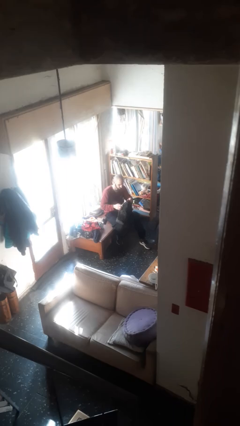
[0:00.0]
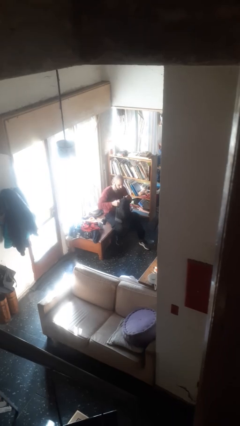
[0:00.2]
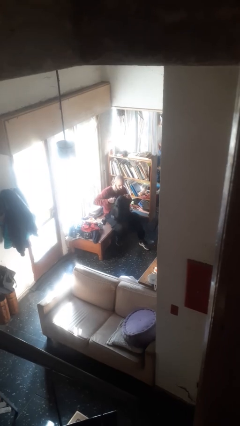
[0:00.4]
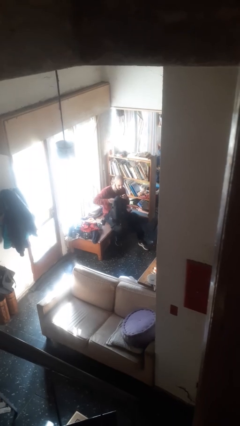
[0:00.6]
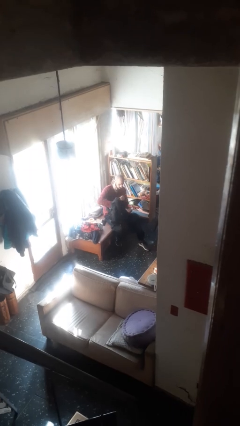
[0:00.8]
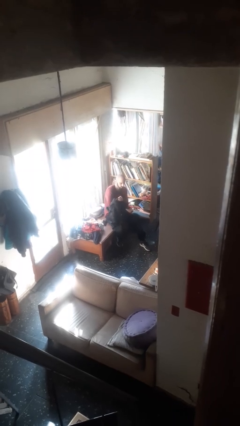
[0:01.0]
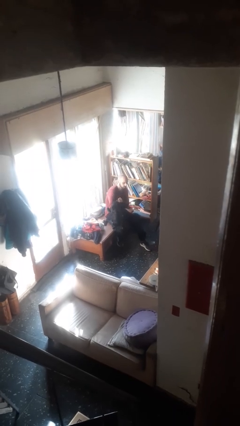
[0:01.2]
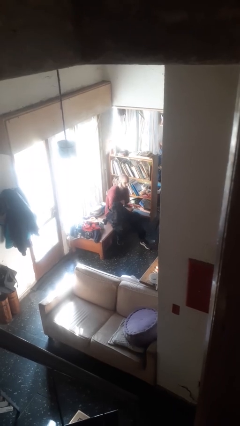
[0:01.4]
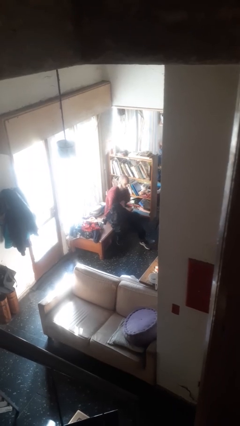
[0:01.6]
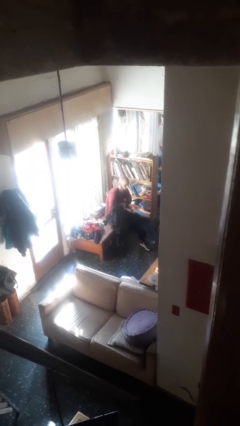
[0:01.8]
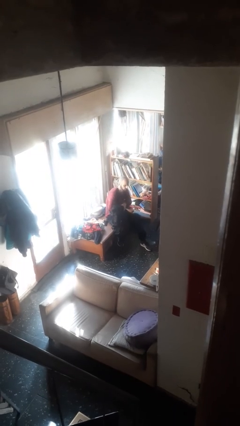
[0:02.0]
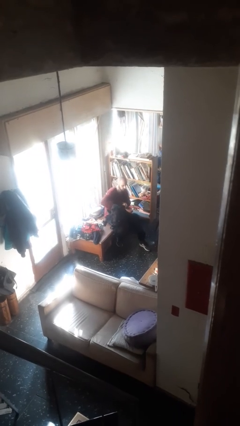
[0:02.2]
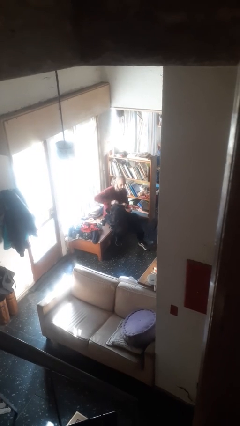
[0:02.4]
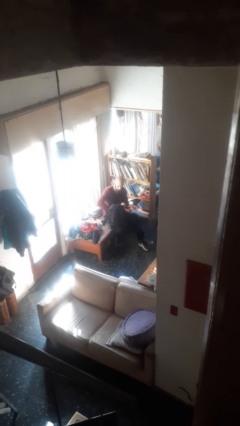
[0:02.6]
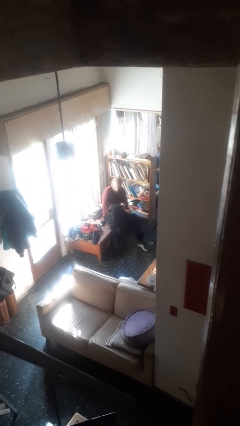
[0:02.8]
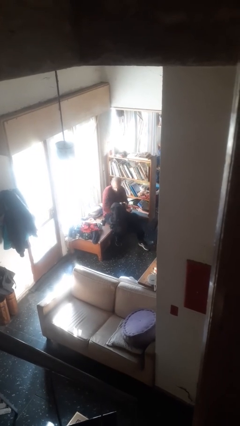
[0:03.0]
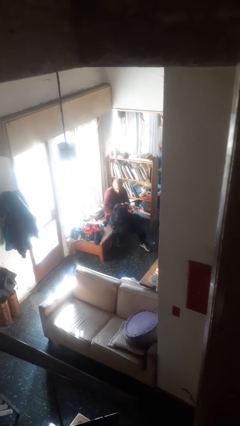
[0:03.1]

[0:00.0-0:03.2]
person searches in backpack

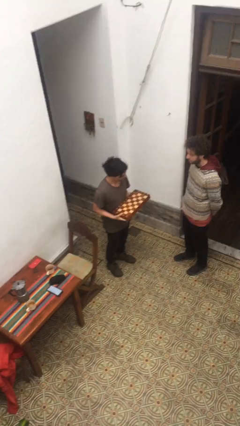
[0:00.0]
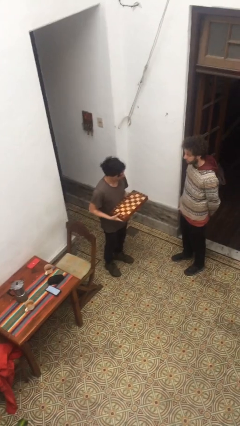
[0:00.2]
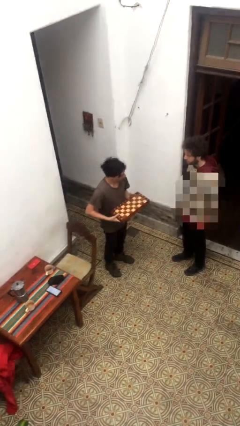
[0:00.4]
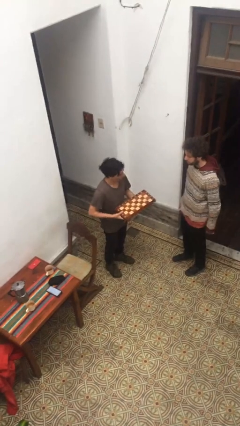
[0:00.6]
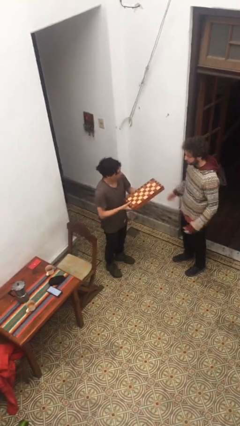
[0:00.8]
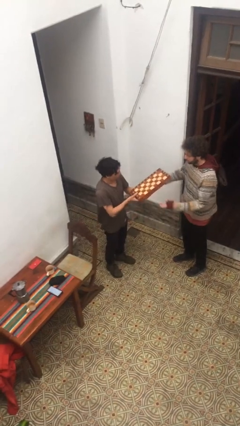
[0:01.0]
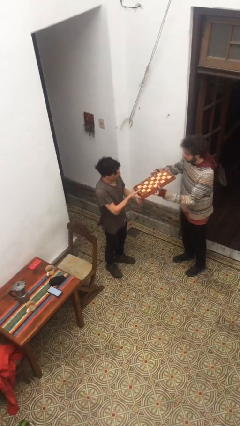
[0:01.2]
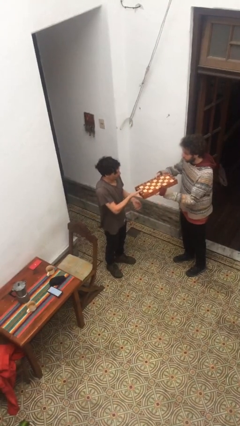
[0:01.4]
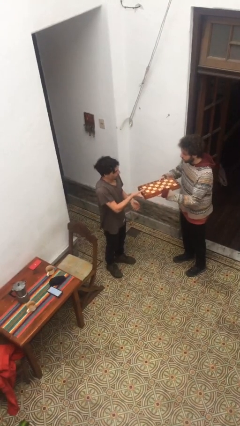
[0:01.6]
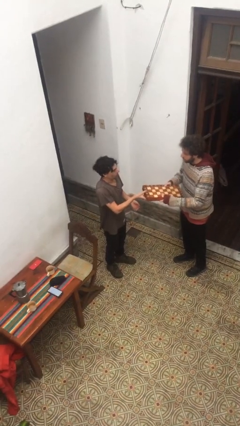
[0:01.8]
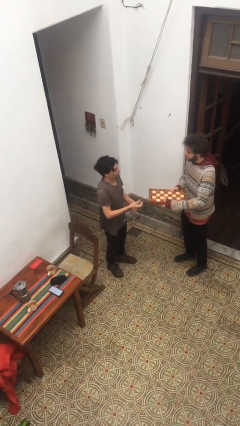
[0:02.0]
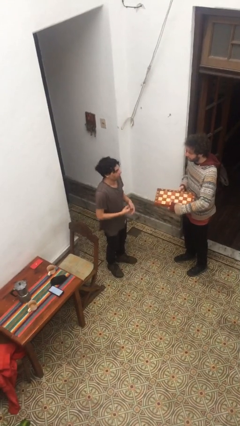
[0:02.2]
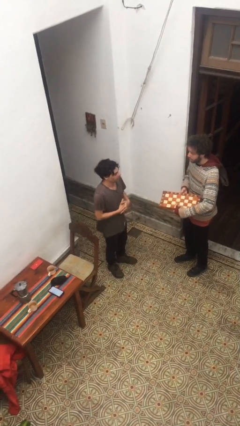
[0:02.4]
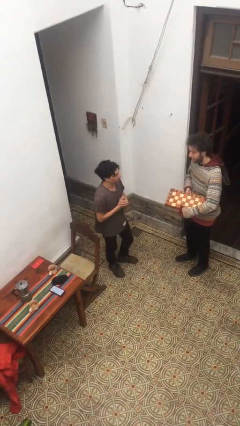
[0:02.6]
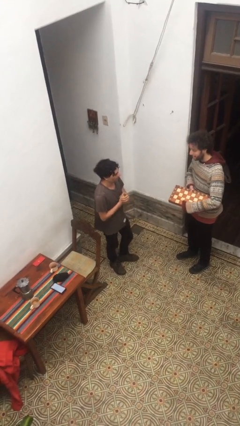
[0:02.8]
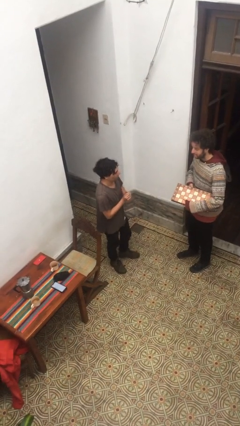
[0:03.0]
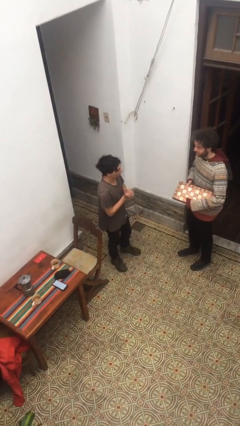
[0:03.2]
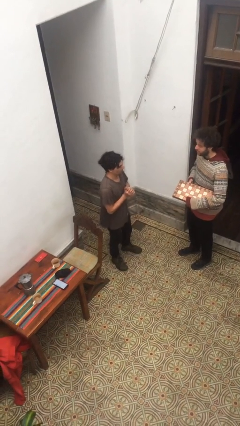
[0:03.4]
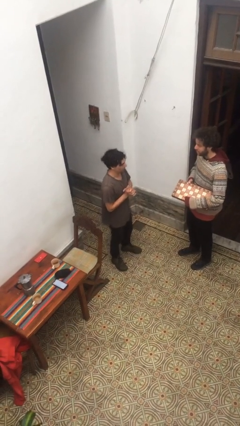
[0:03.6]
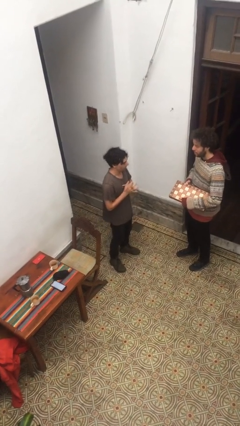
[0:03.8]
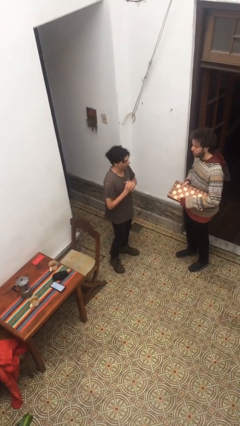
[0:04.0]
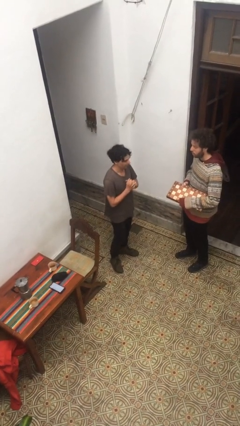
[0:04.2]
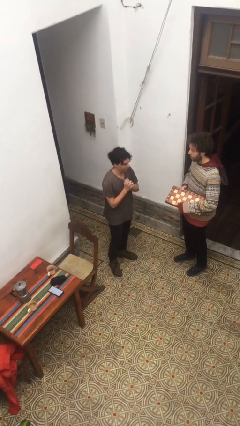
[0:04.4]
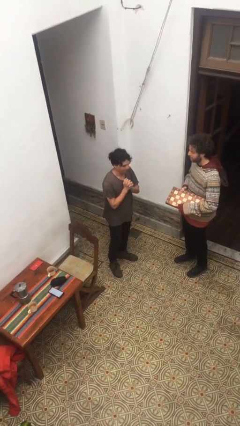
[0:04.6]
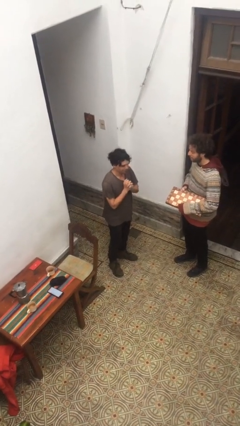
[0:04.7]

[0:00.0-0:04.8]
person transfers object to person

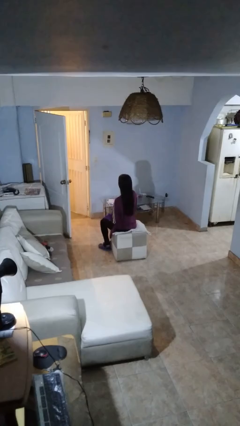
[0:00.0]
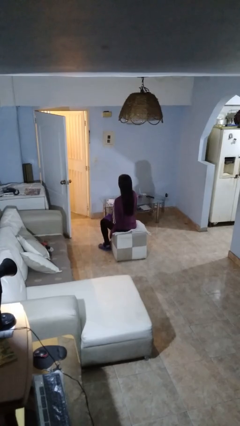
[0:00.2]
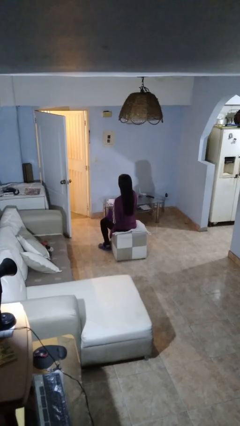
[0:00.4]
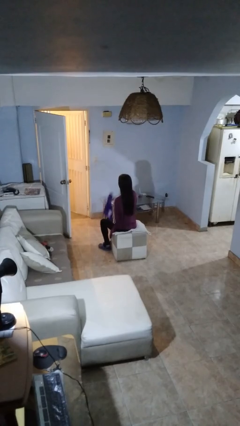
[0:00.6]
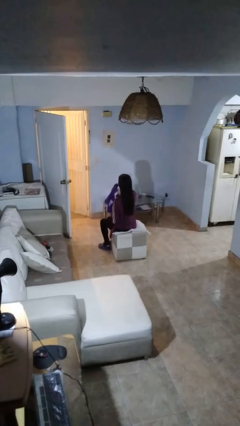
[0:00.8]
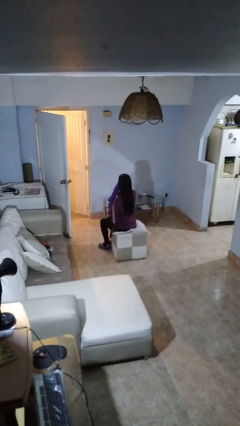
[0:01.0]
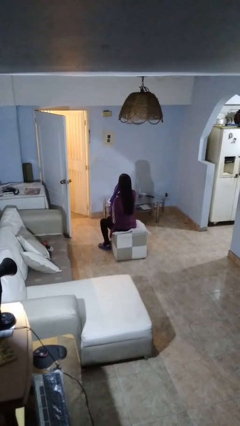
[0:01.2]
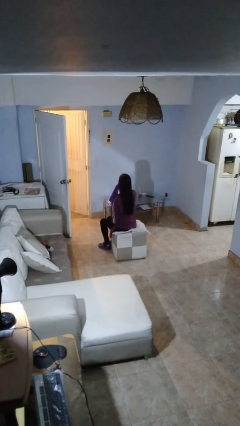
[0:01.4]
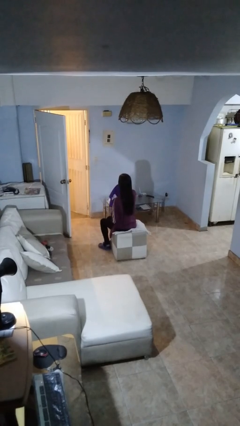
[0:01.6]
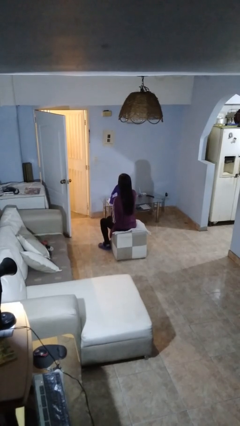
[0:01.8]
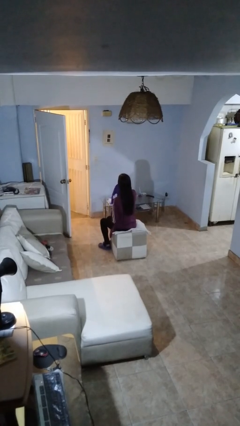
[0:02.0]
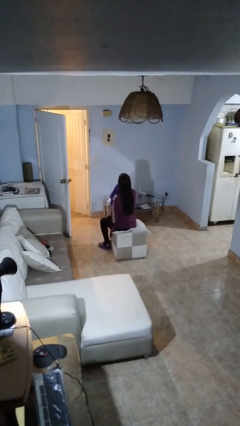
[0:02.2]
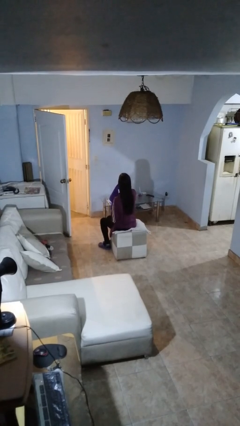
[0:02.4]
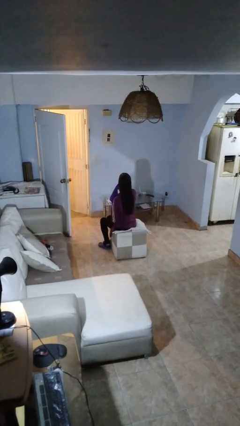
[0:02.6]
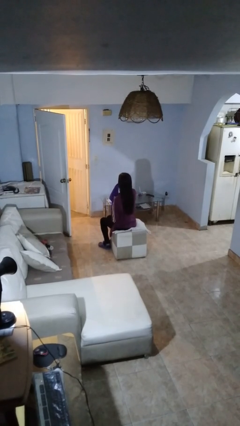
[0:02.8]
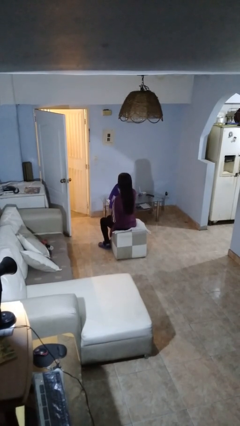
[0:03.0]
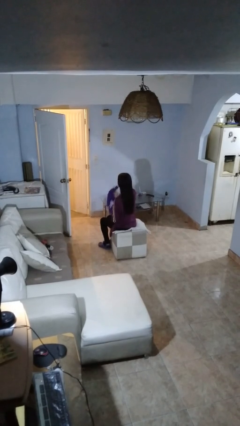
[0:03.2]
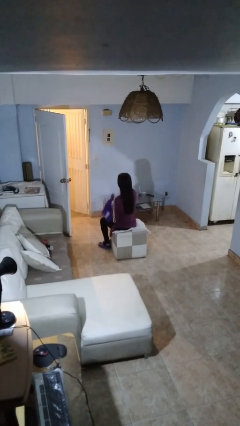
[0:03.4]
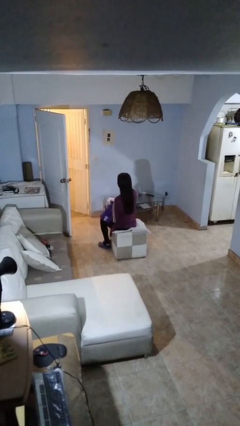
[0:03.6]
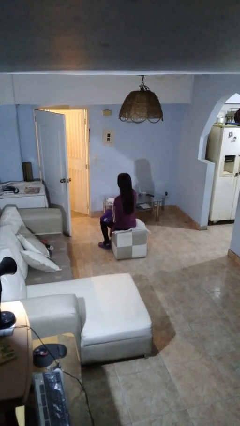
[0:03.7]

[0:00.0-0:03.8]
person wipes mouth with napkin

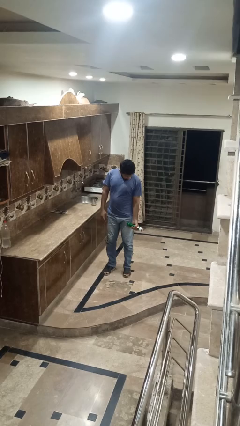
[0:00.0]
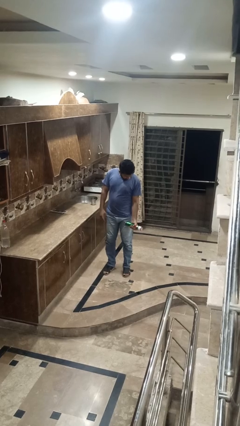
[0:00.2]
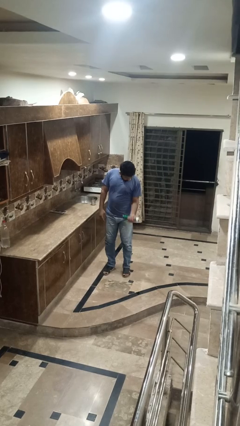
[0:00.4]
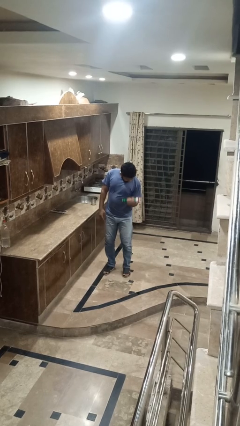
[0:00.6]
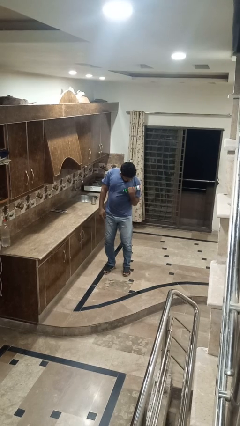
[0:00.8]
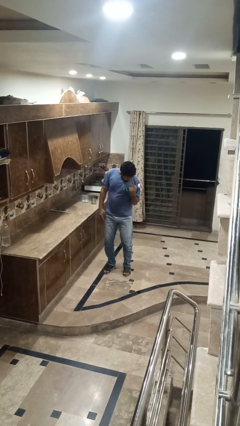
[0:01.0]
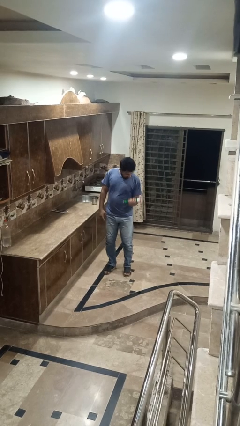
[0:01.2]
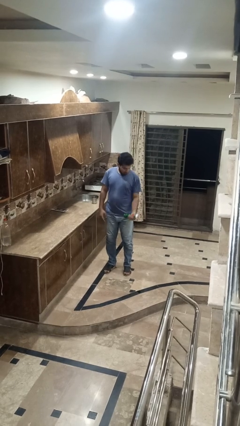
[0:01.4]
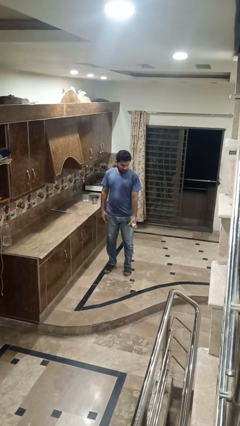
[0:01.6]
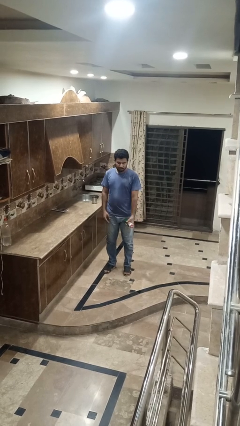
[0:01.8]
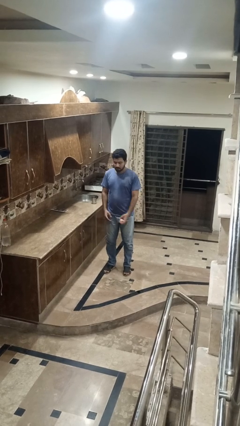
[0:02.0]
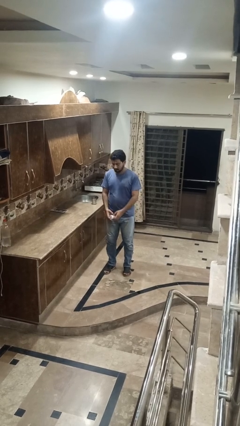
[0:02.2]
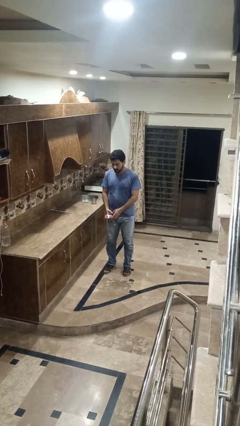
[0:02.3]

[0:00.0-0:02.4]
person lifts dumbbells

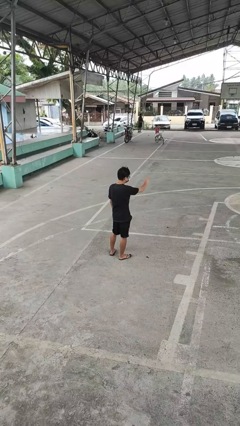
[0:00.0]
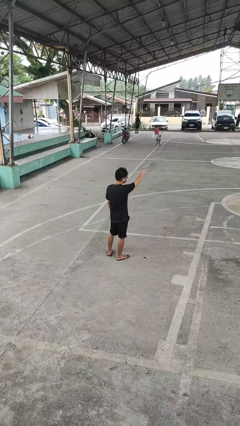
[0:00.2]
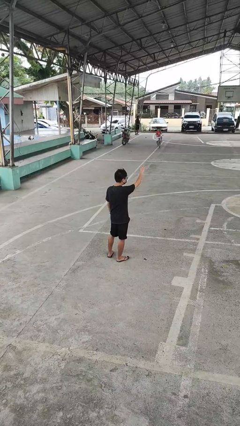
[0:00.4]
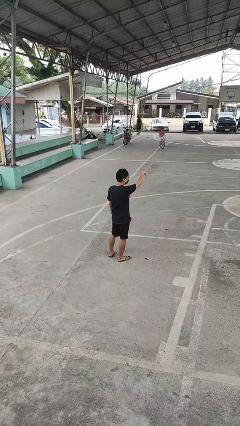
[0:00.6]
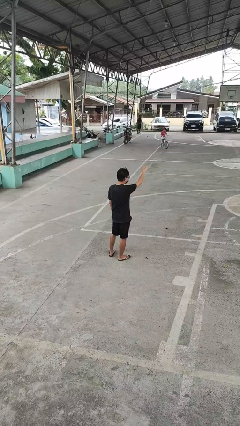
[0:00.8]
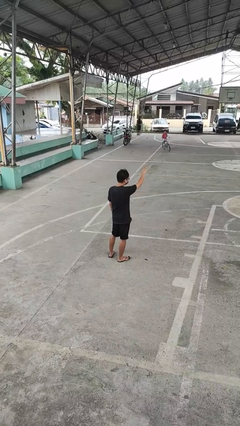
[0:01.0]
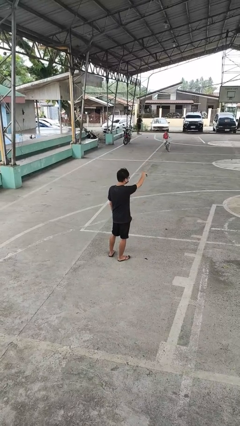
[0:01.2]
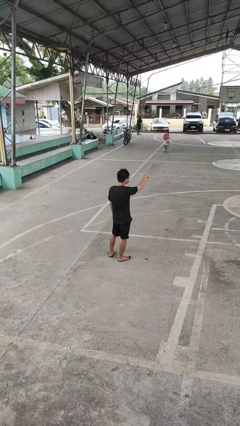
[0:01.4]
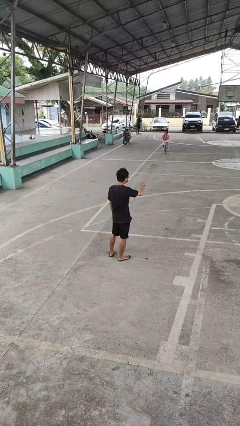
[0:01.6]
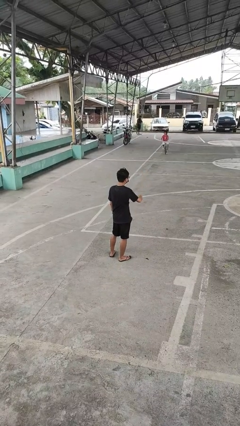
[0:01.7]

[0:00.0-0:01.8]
person gestures come here

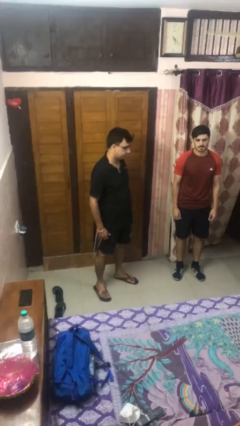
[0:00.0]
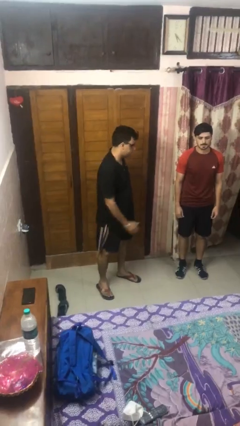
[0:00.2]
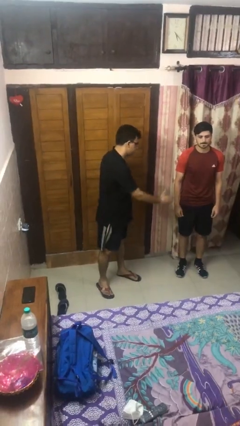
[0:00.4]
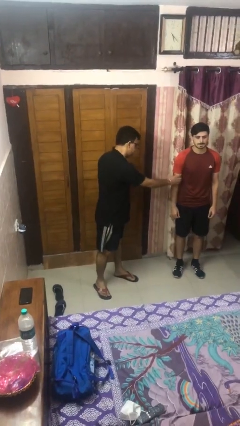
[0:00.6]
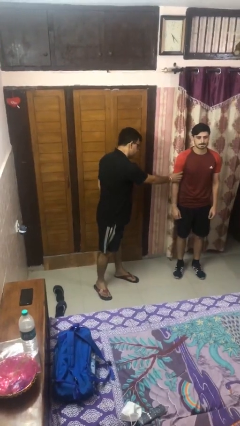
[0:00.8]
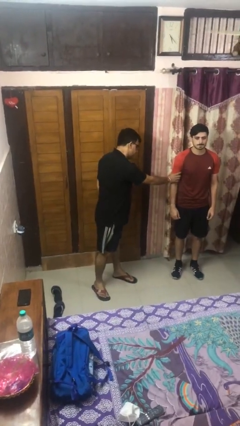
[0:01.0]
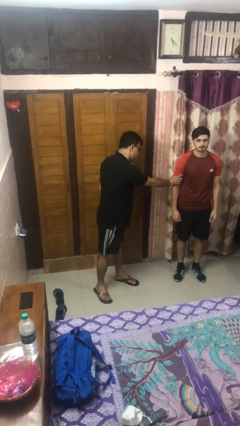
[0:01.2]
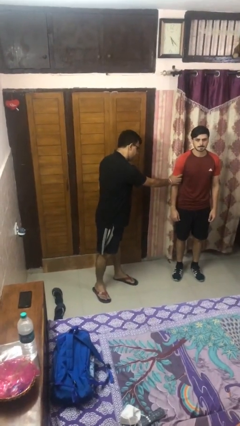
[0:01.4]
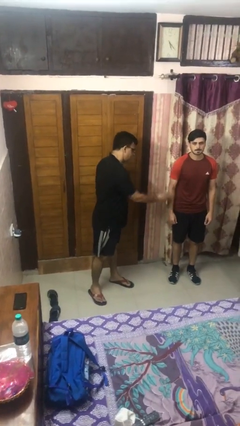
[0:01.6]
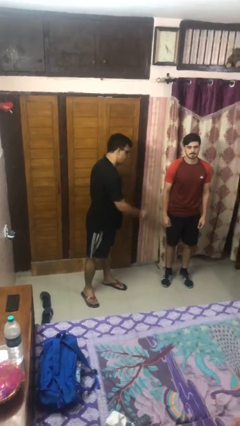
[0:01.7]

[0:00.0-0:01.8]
person grabs person by bicep
